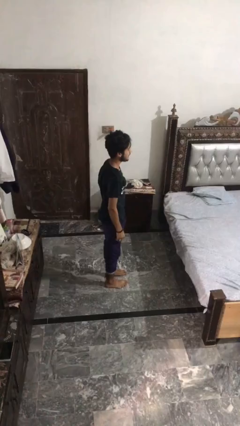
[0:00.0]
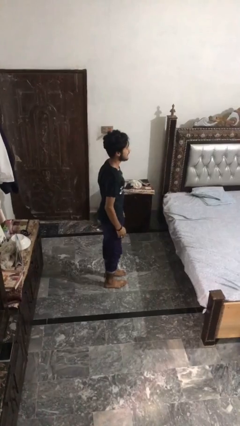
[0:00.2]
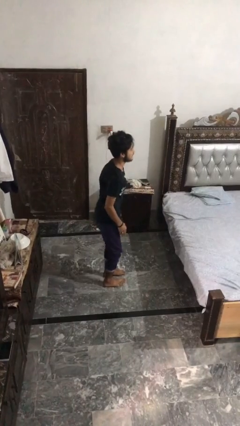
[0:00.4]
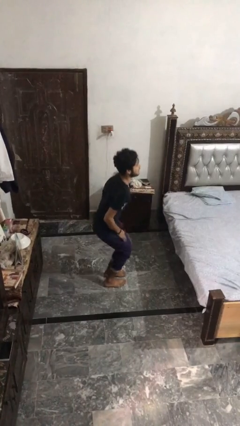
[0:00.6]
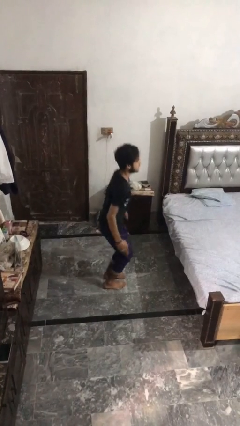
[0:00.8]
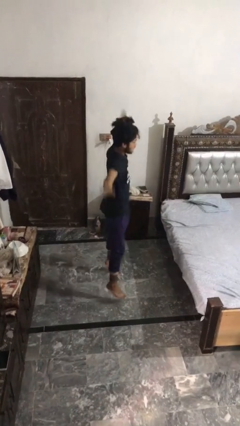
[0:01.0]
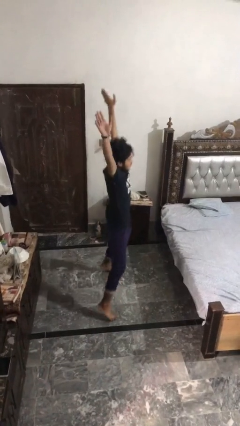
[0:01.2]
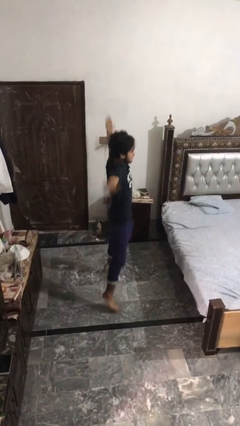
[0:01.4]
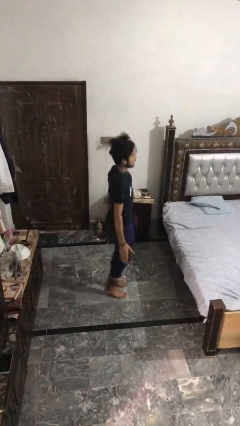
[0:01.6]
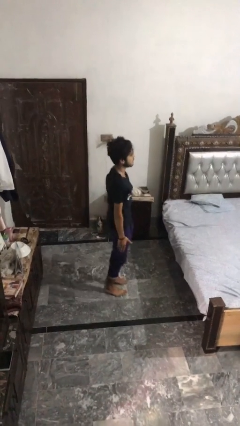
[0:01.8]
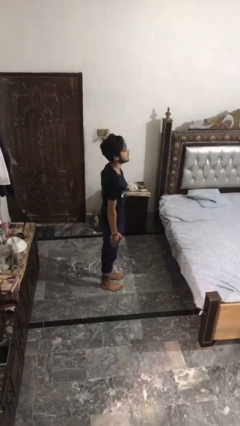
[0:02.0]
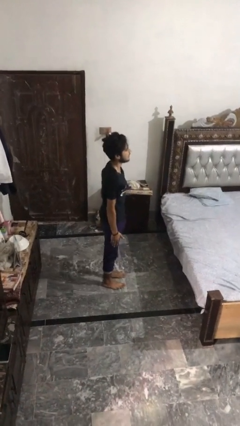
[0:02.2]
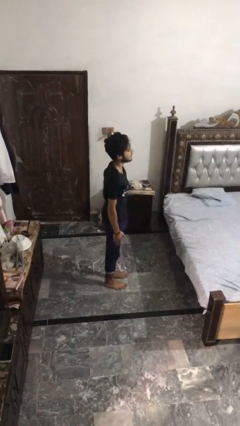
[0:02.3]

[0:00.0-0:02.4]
person exercises with jumping jacks

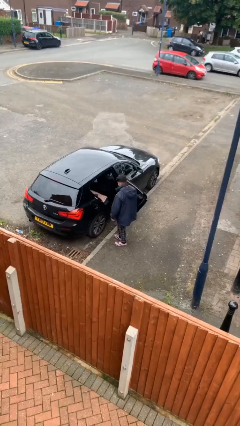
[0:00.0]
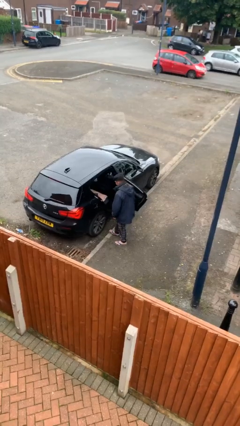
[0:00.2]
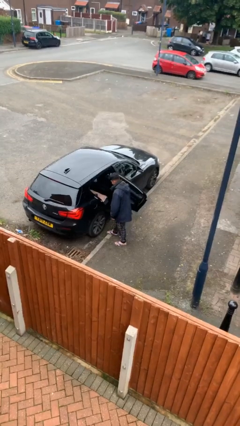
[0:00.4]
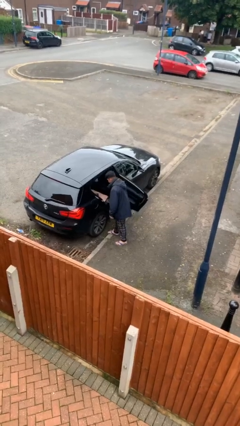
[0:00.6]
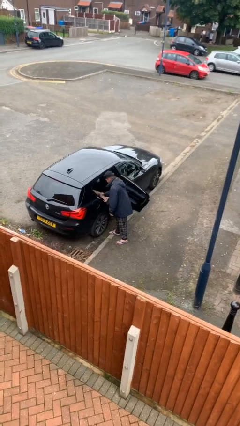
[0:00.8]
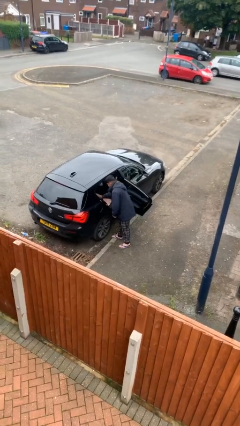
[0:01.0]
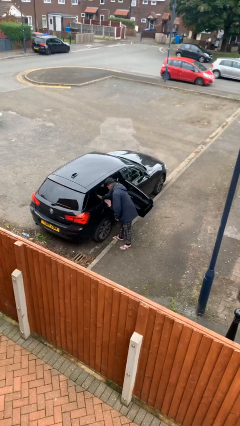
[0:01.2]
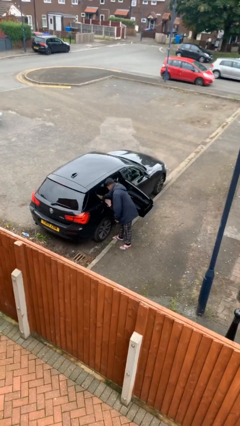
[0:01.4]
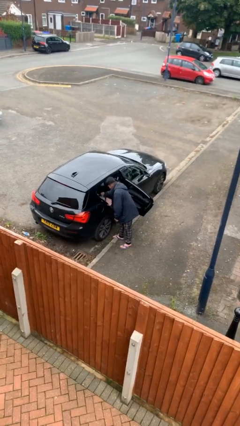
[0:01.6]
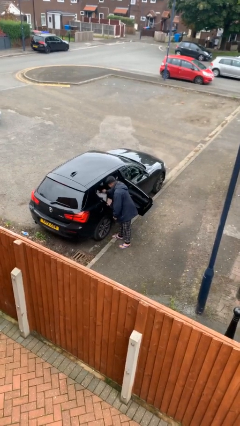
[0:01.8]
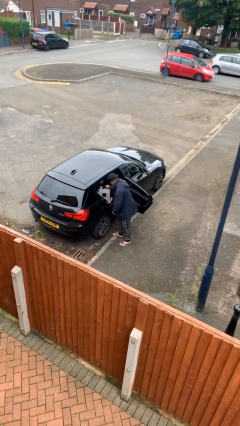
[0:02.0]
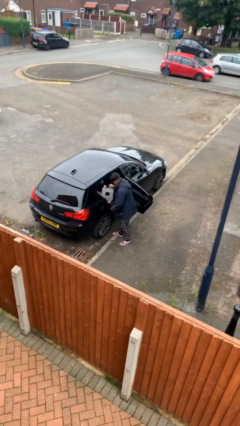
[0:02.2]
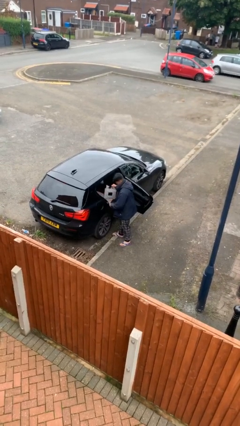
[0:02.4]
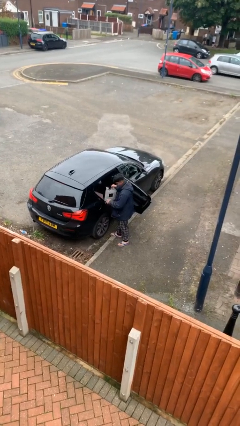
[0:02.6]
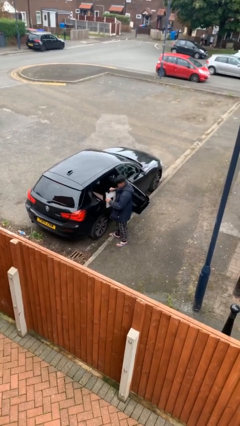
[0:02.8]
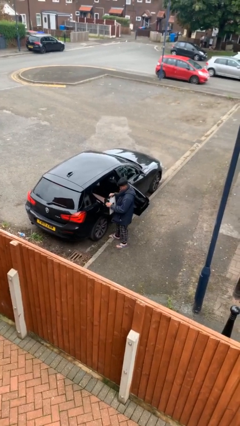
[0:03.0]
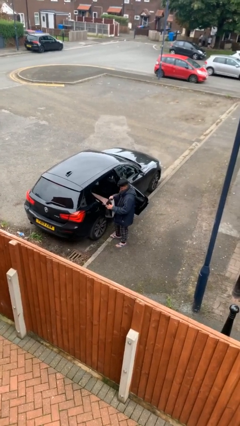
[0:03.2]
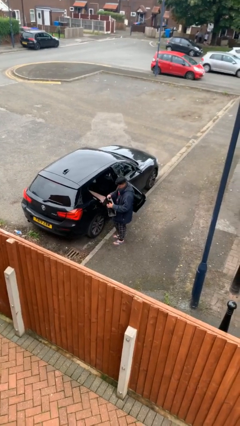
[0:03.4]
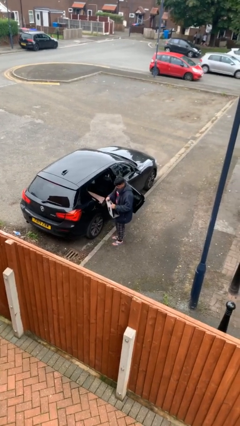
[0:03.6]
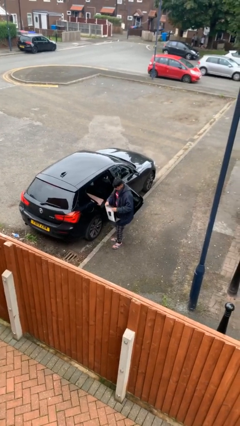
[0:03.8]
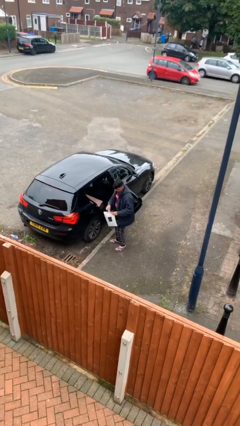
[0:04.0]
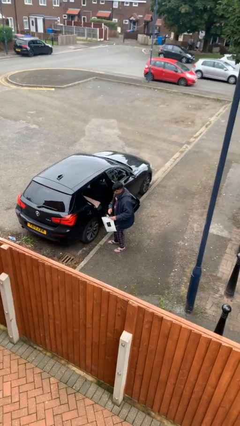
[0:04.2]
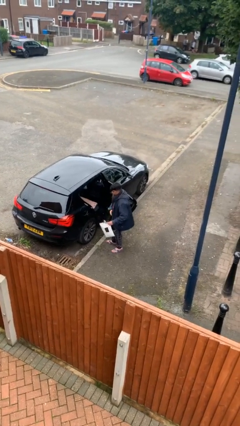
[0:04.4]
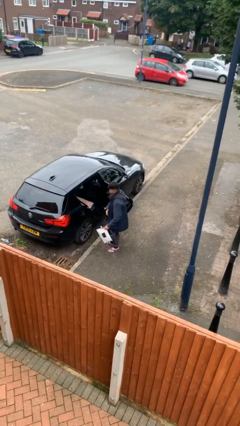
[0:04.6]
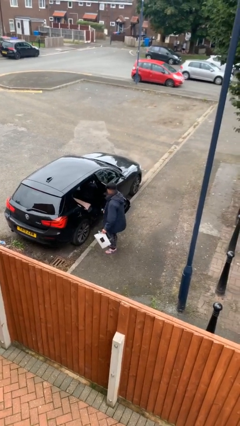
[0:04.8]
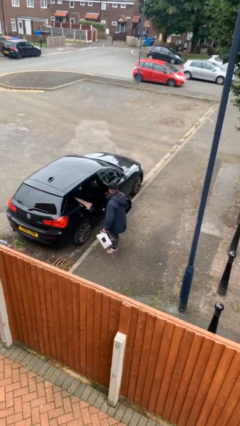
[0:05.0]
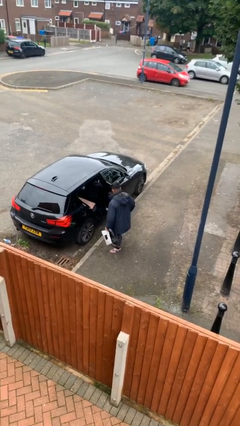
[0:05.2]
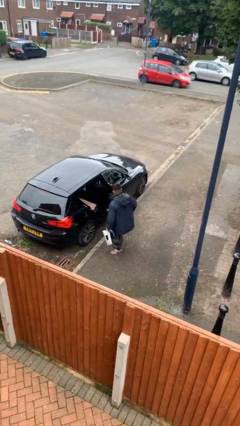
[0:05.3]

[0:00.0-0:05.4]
person unloads car

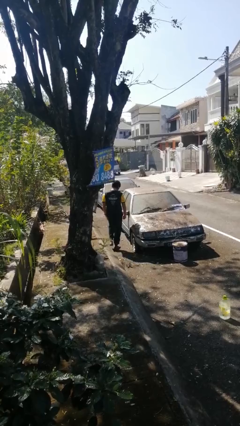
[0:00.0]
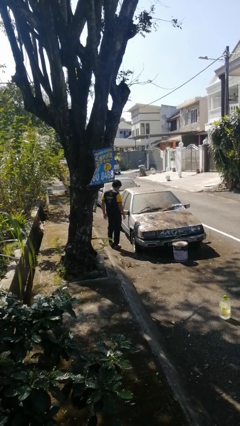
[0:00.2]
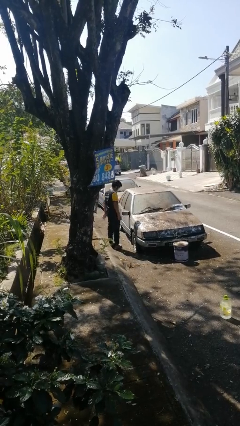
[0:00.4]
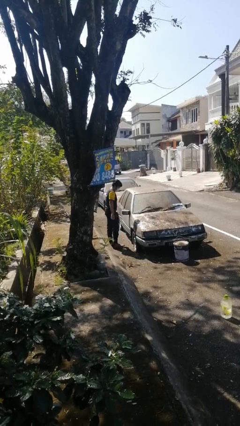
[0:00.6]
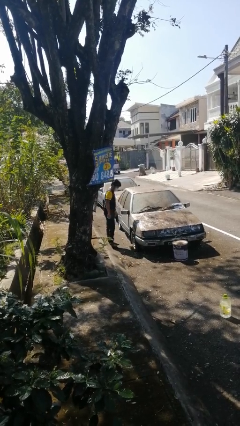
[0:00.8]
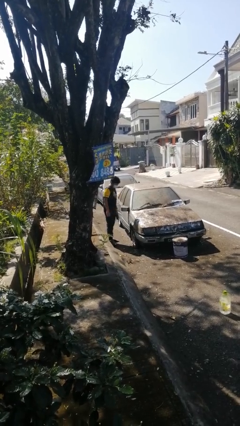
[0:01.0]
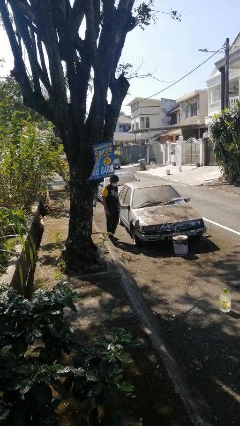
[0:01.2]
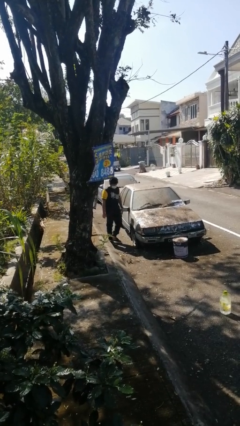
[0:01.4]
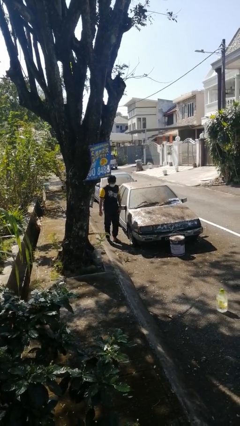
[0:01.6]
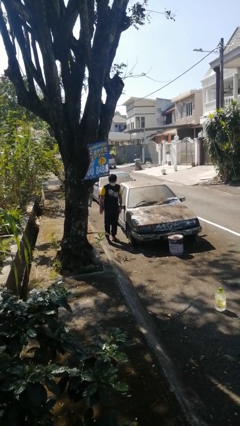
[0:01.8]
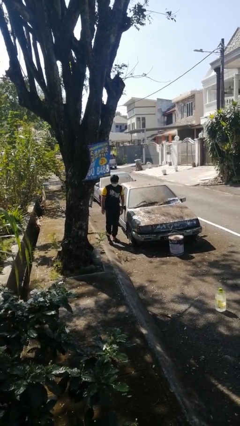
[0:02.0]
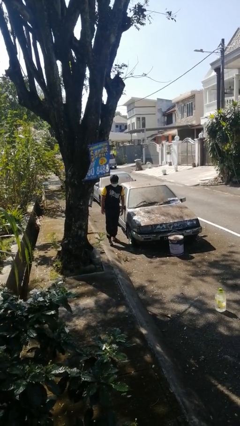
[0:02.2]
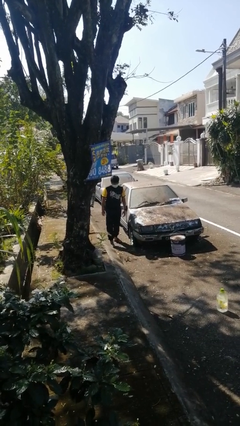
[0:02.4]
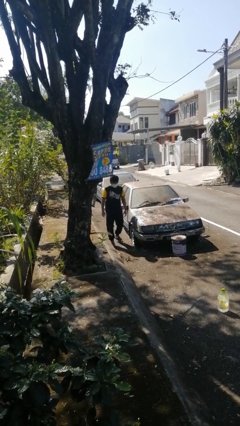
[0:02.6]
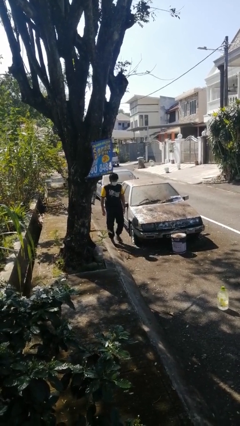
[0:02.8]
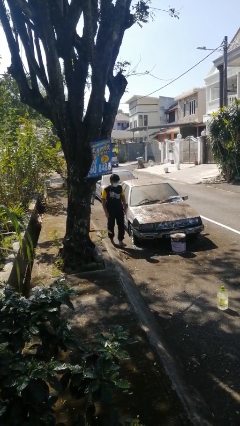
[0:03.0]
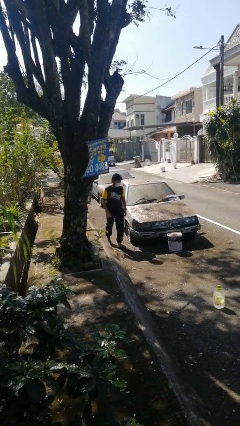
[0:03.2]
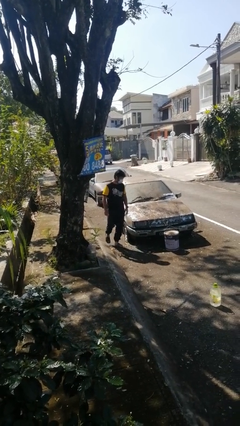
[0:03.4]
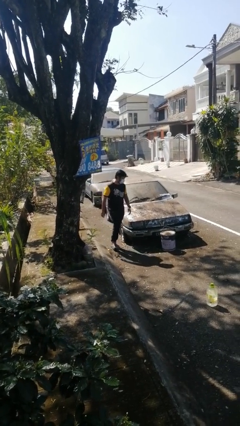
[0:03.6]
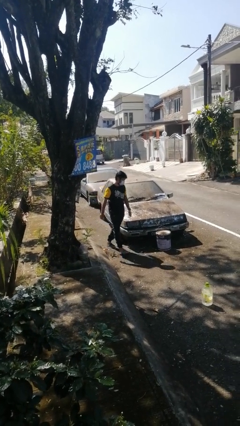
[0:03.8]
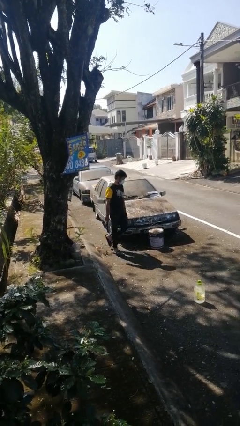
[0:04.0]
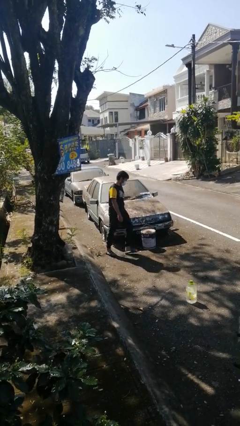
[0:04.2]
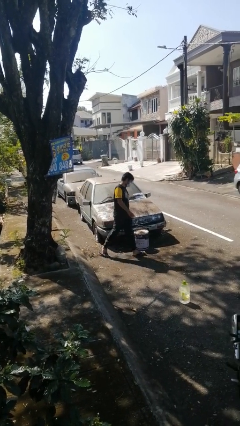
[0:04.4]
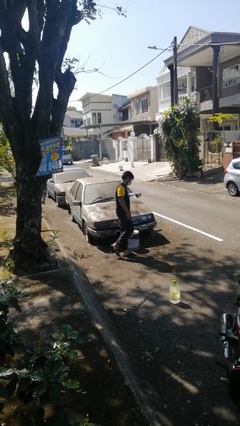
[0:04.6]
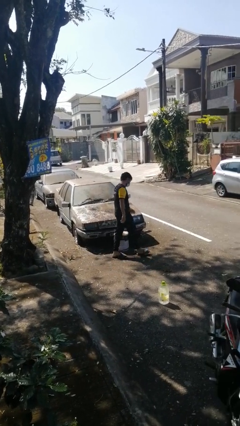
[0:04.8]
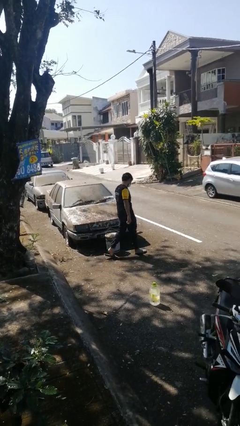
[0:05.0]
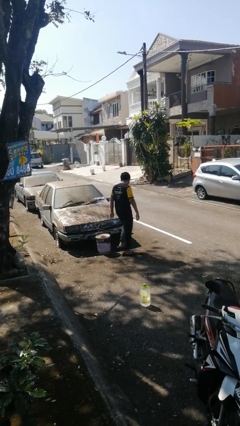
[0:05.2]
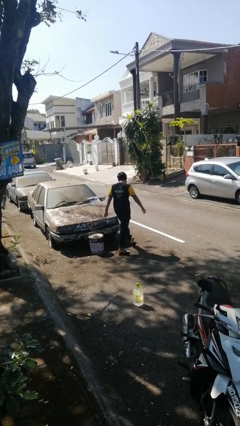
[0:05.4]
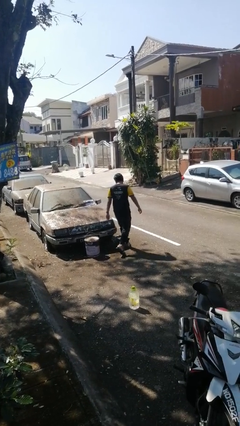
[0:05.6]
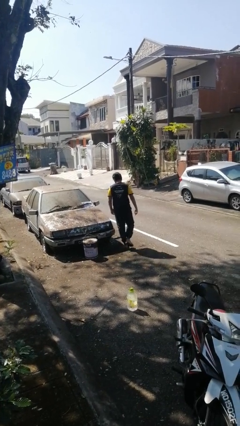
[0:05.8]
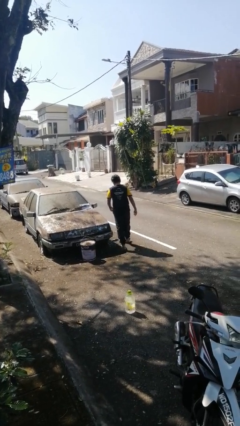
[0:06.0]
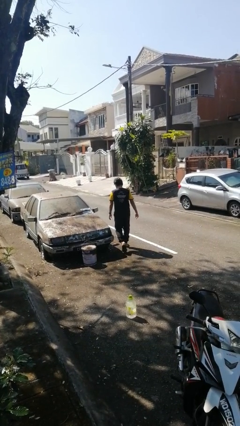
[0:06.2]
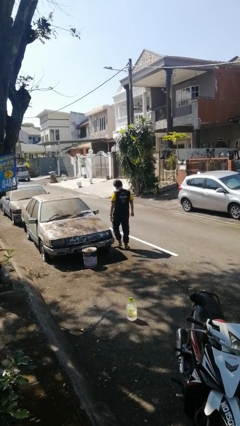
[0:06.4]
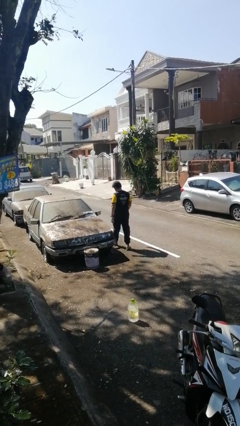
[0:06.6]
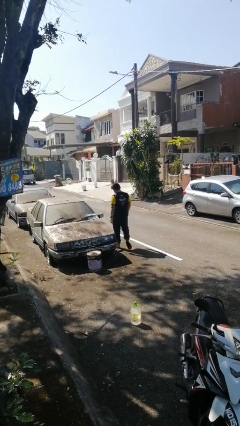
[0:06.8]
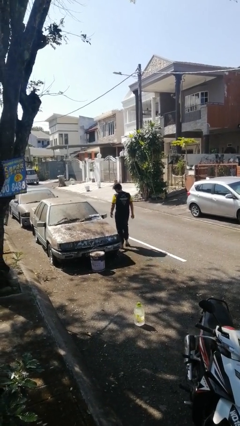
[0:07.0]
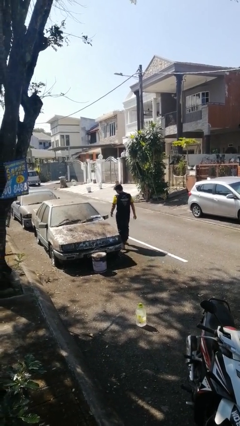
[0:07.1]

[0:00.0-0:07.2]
person walks around car

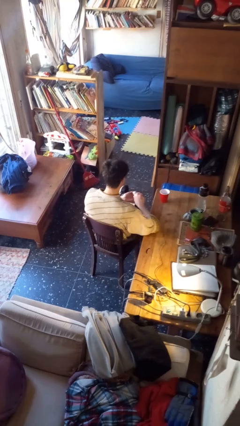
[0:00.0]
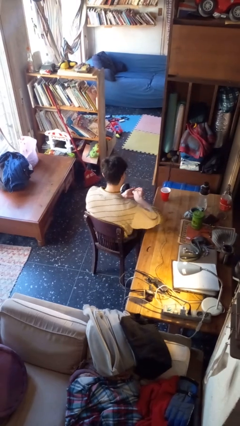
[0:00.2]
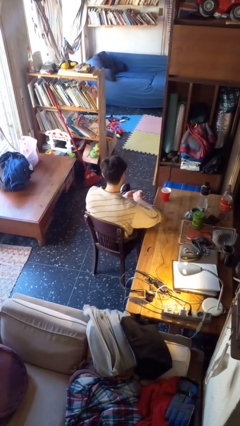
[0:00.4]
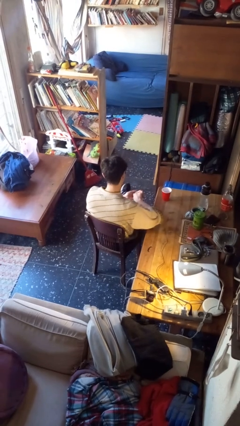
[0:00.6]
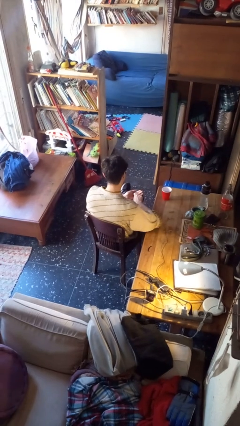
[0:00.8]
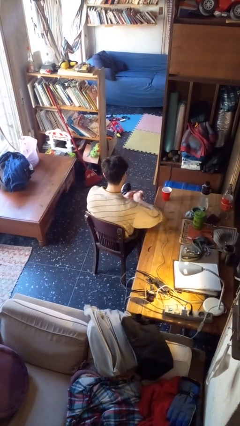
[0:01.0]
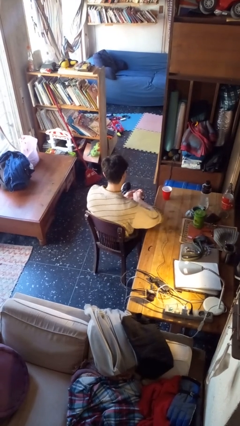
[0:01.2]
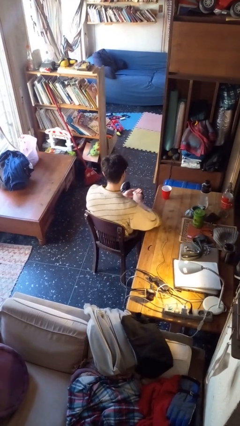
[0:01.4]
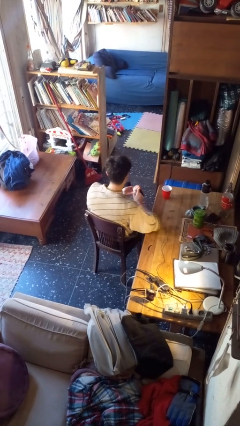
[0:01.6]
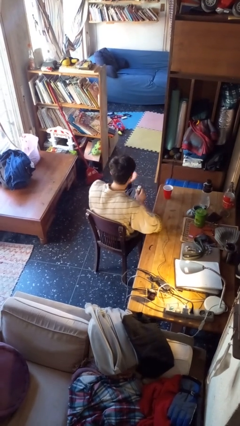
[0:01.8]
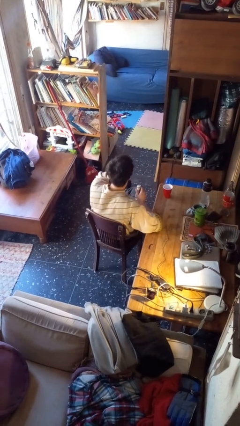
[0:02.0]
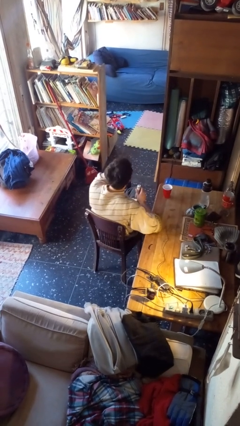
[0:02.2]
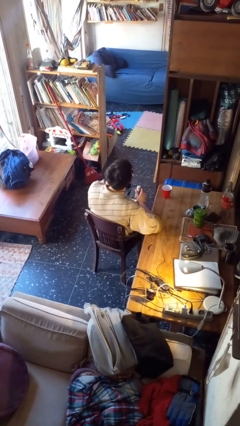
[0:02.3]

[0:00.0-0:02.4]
person takes medicine pills

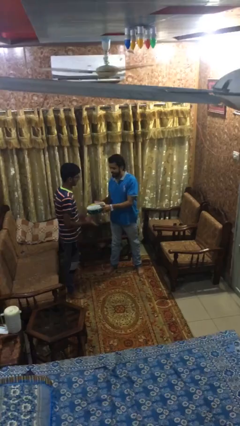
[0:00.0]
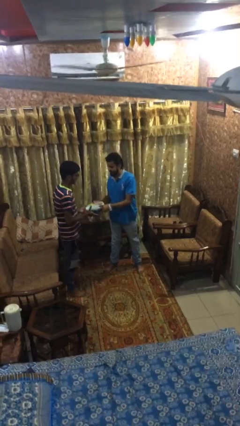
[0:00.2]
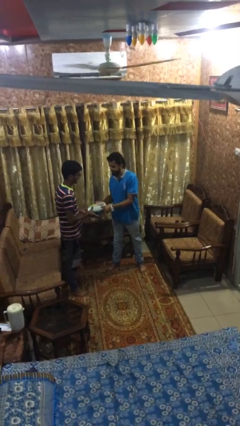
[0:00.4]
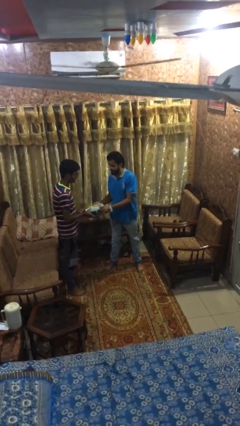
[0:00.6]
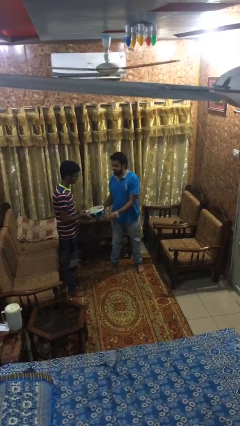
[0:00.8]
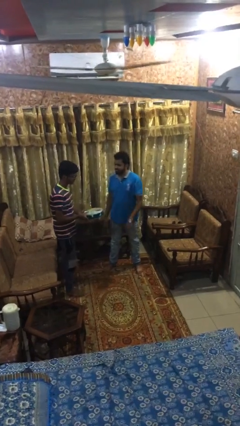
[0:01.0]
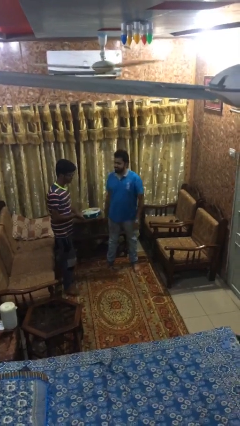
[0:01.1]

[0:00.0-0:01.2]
person transfers object to person
